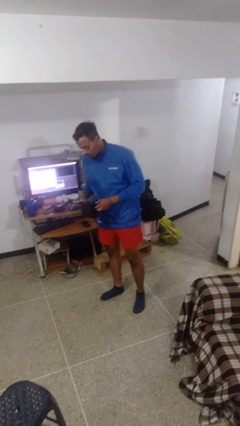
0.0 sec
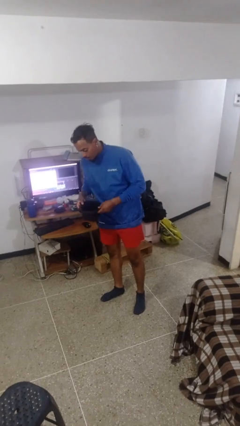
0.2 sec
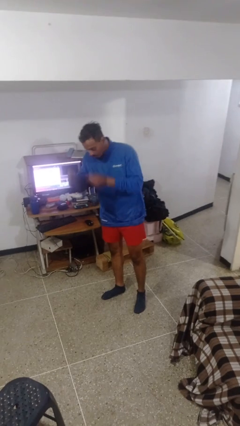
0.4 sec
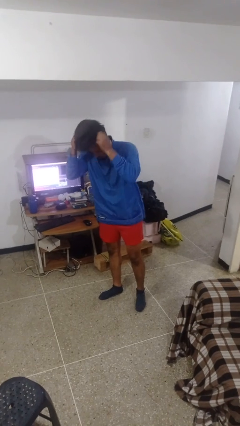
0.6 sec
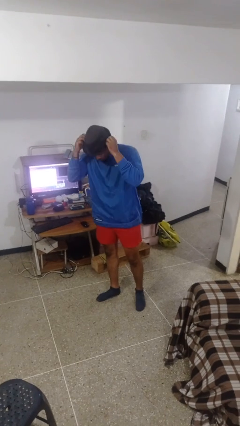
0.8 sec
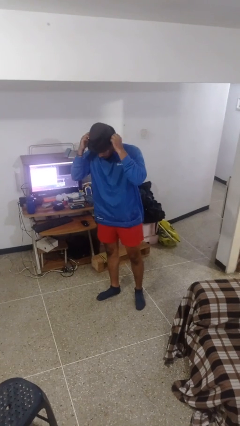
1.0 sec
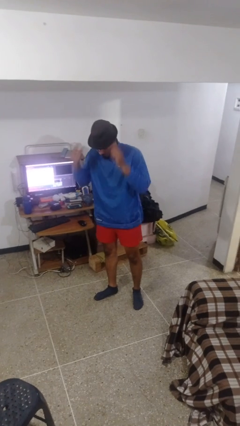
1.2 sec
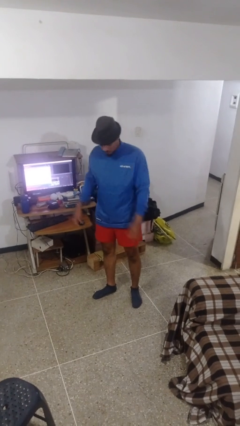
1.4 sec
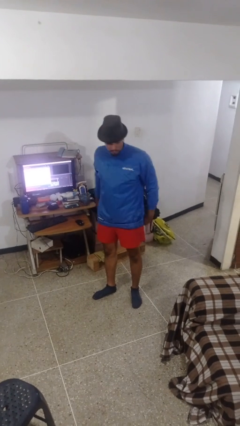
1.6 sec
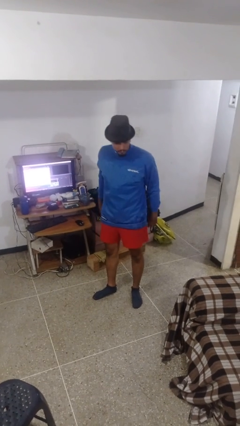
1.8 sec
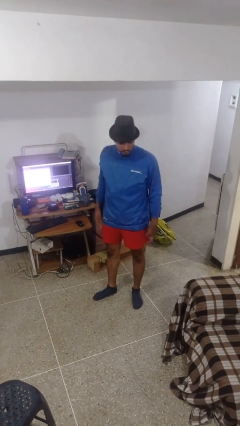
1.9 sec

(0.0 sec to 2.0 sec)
person puts on hat

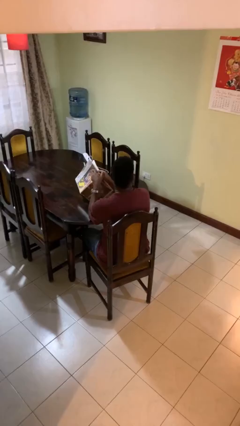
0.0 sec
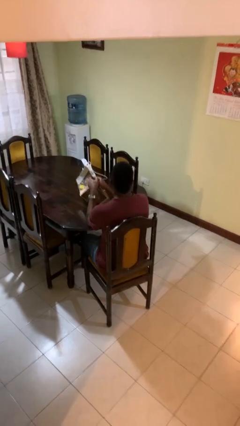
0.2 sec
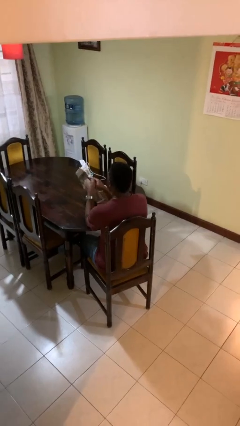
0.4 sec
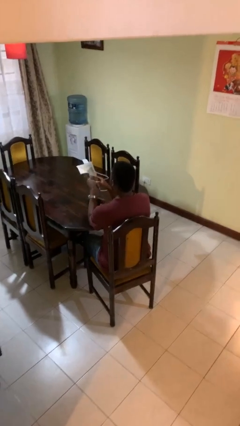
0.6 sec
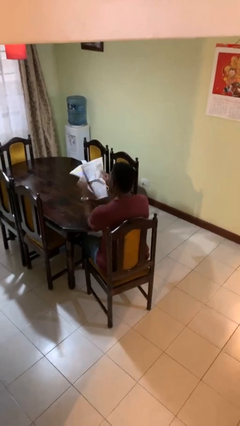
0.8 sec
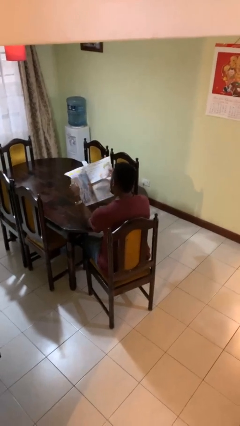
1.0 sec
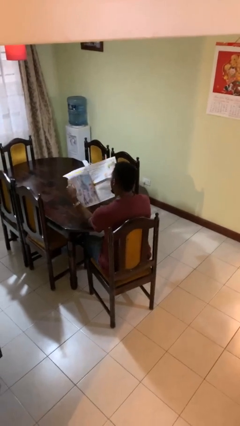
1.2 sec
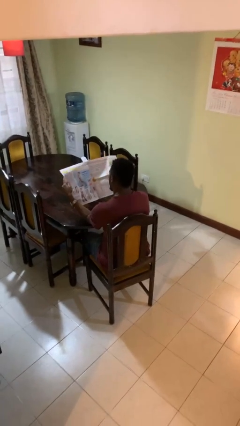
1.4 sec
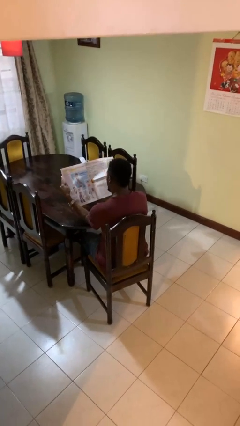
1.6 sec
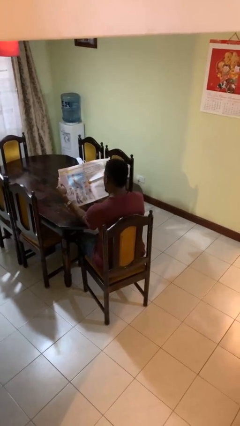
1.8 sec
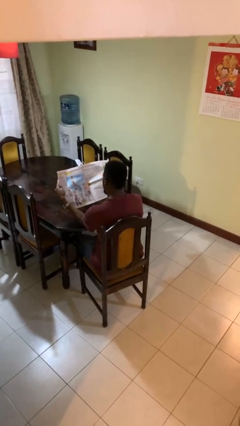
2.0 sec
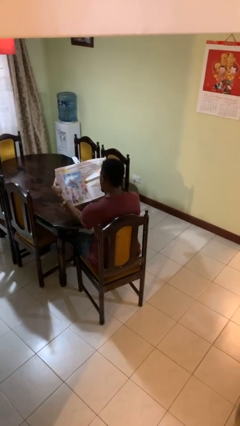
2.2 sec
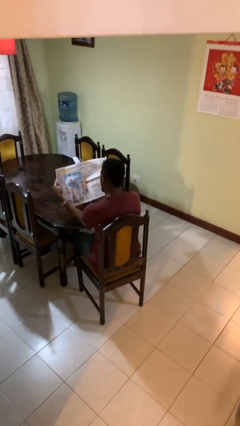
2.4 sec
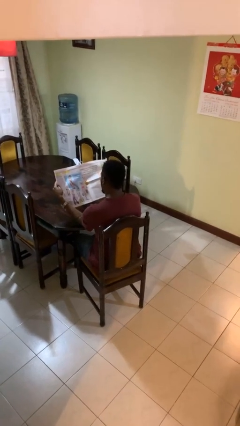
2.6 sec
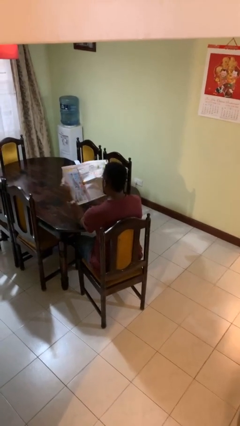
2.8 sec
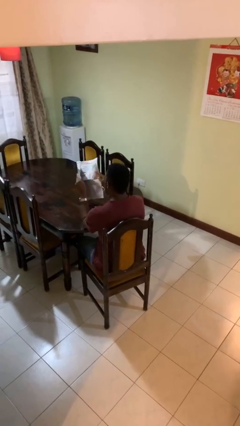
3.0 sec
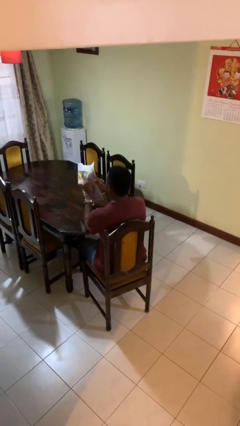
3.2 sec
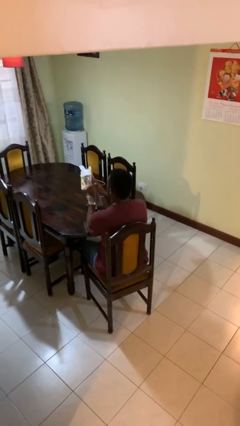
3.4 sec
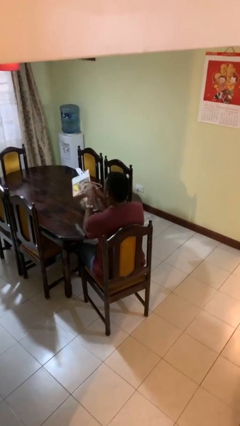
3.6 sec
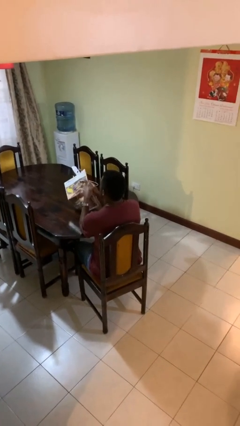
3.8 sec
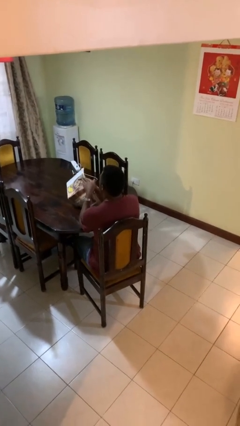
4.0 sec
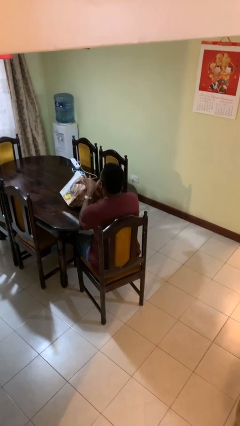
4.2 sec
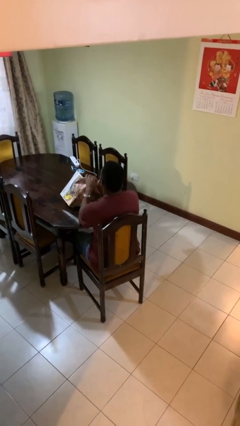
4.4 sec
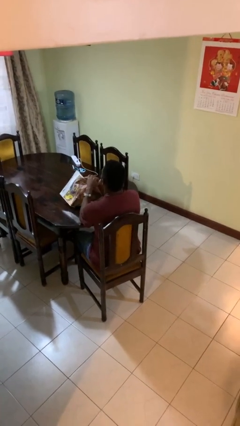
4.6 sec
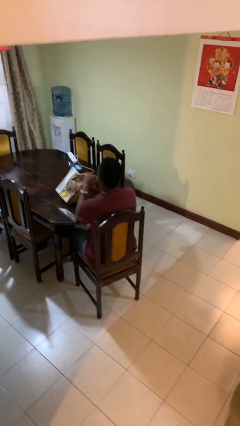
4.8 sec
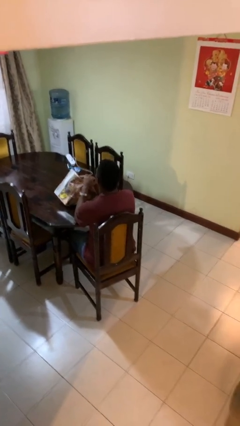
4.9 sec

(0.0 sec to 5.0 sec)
person reads newspaper

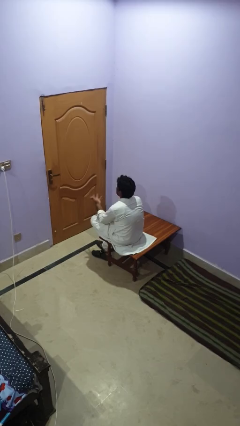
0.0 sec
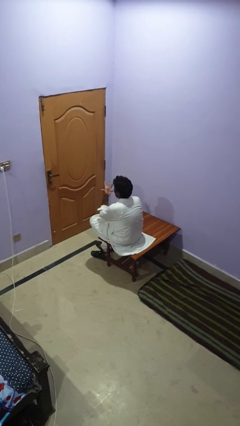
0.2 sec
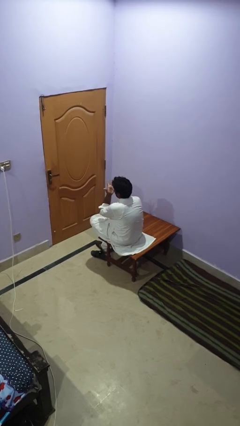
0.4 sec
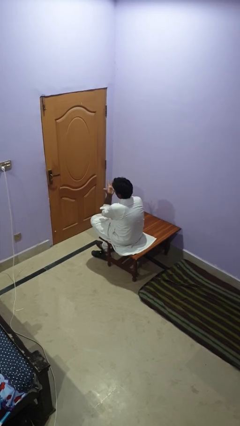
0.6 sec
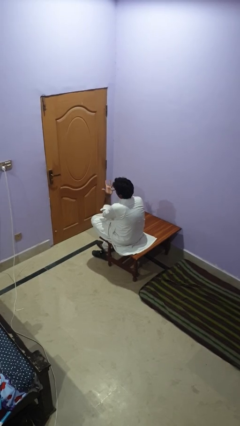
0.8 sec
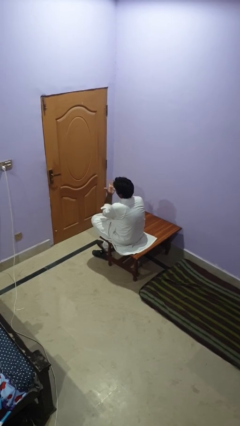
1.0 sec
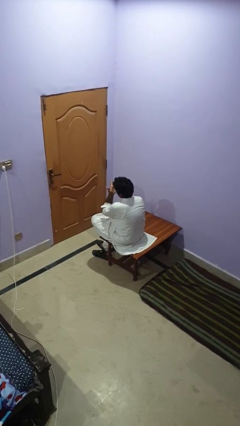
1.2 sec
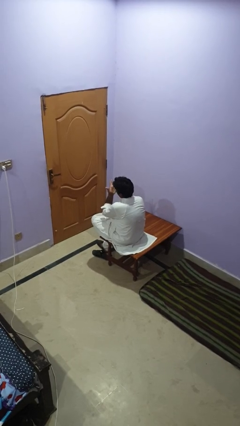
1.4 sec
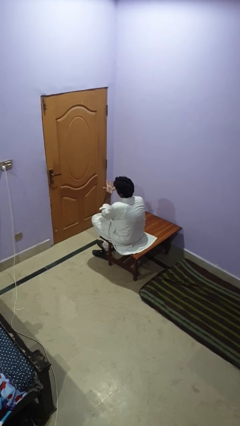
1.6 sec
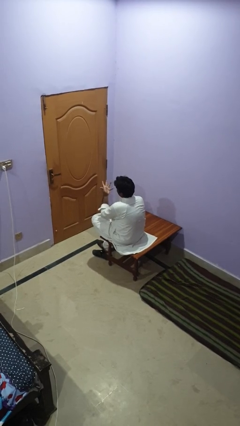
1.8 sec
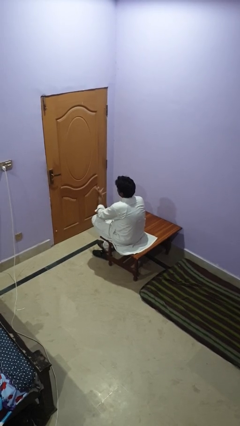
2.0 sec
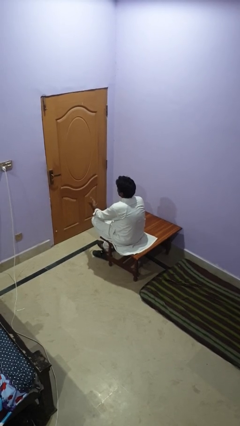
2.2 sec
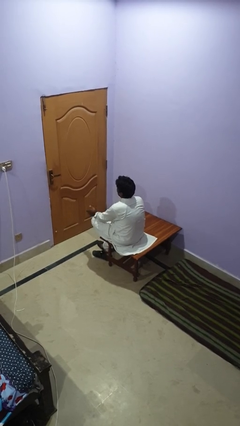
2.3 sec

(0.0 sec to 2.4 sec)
person licks fingers

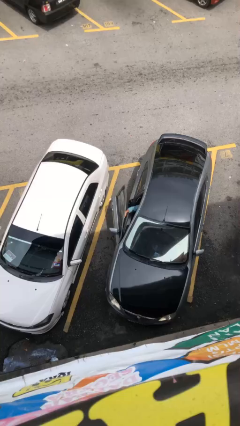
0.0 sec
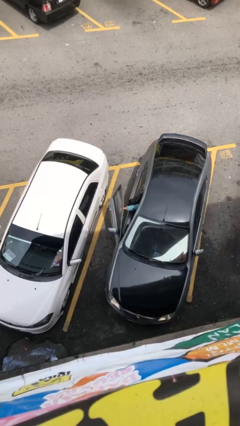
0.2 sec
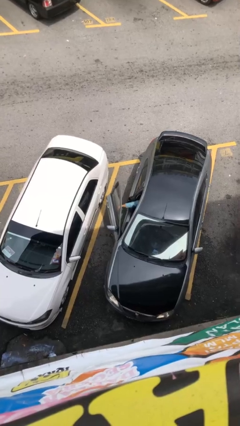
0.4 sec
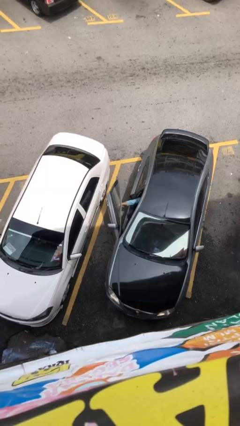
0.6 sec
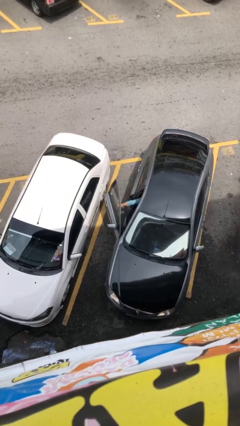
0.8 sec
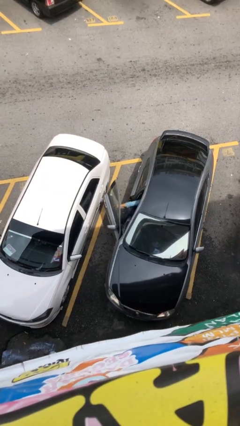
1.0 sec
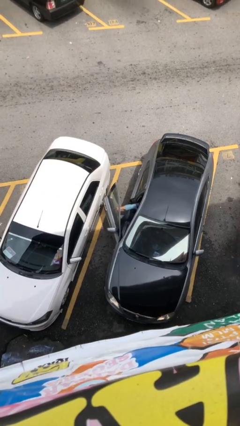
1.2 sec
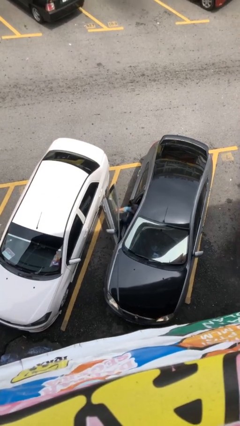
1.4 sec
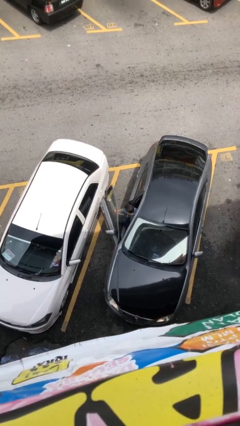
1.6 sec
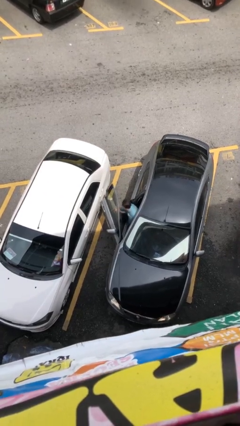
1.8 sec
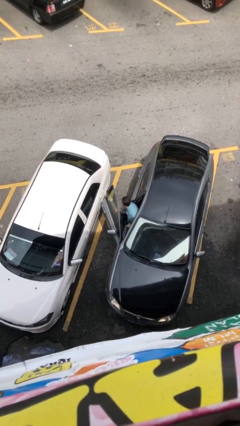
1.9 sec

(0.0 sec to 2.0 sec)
person opens car door

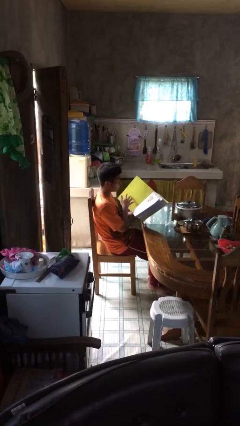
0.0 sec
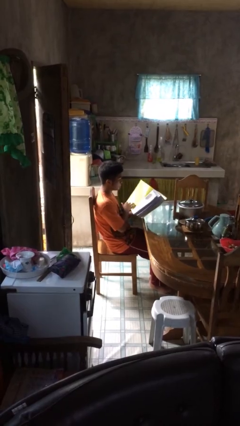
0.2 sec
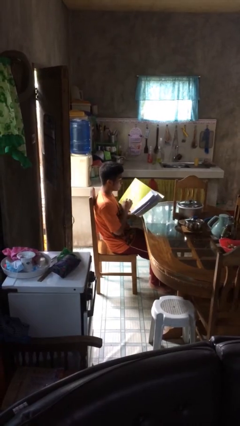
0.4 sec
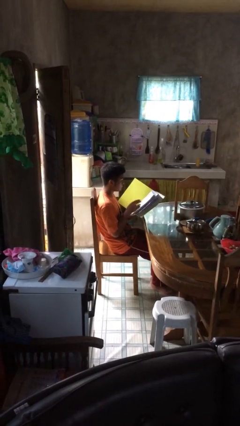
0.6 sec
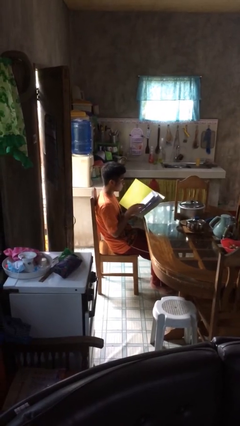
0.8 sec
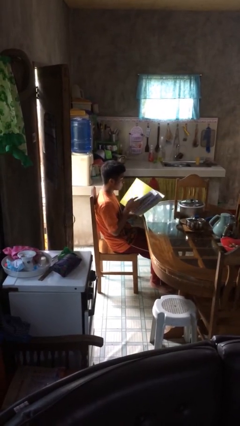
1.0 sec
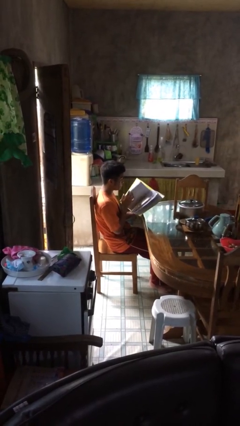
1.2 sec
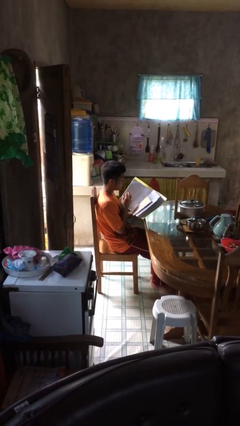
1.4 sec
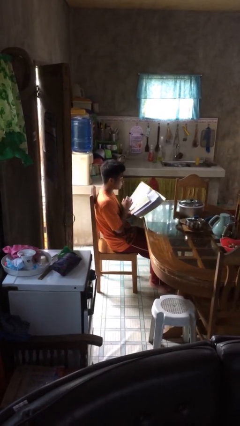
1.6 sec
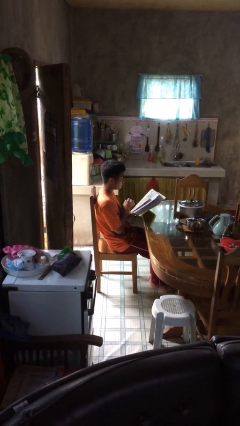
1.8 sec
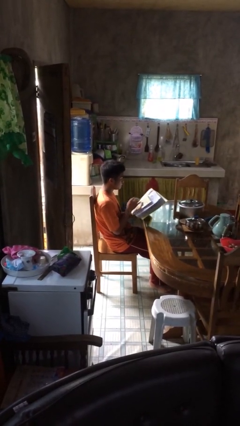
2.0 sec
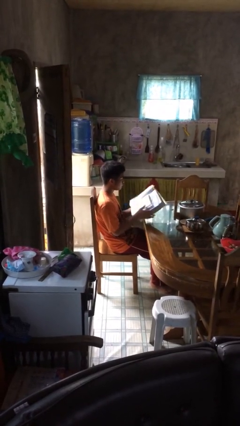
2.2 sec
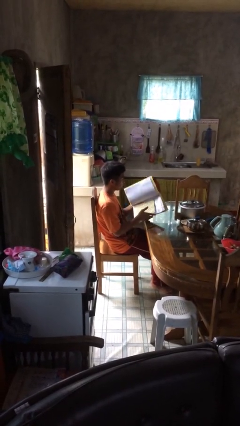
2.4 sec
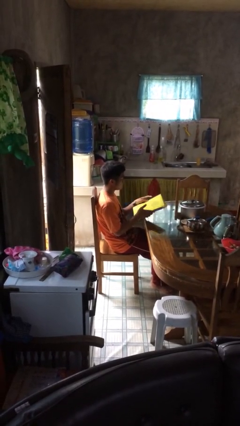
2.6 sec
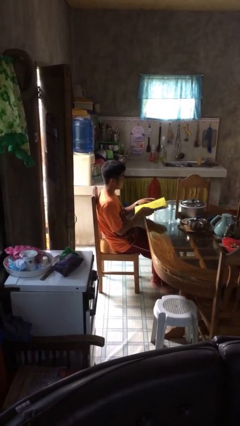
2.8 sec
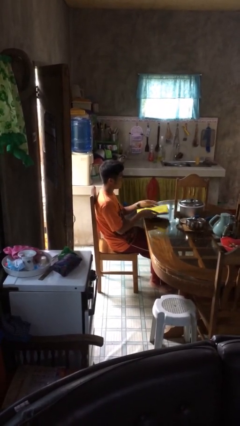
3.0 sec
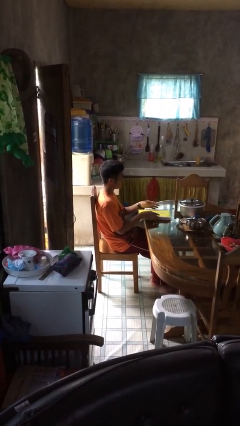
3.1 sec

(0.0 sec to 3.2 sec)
person reads document

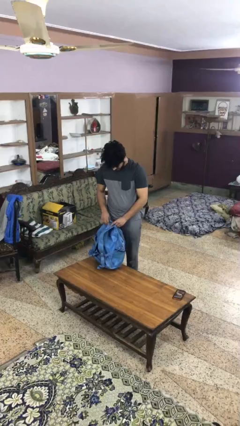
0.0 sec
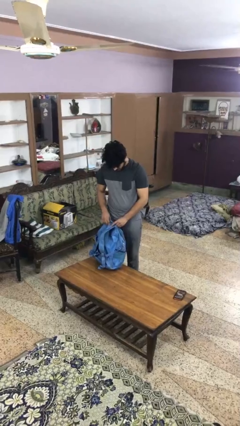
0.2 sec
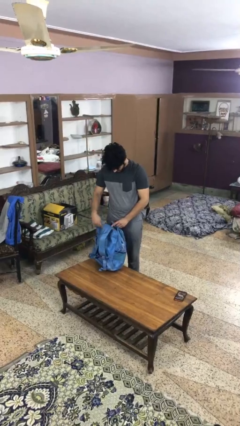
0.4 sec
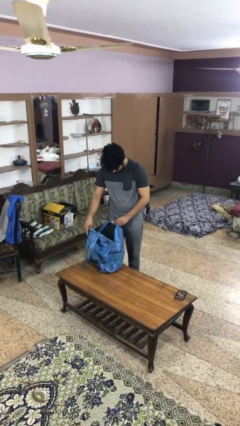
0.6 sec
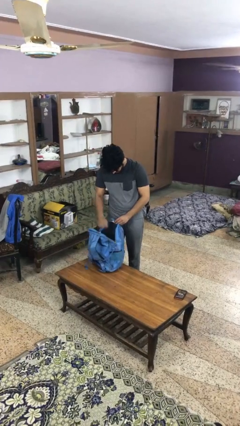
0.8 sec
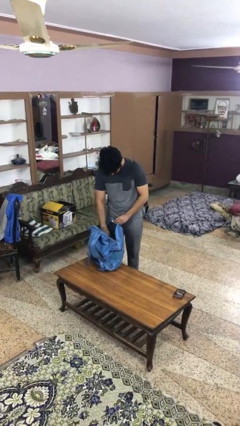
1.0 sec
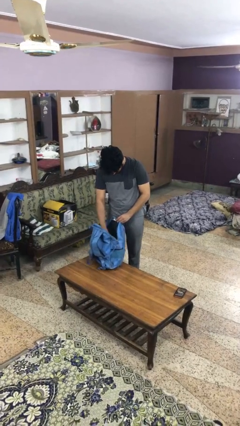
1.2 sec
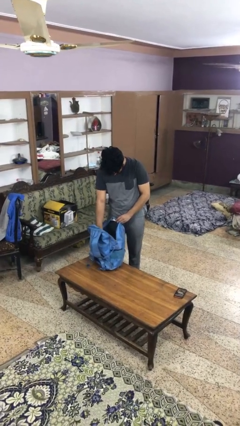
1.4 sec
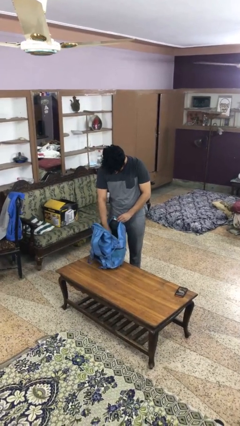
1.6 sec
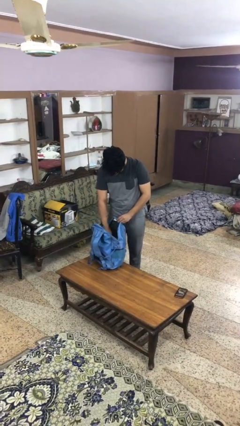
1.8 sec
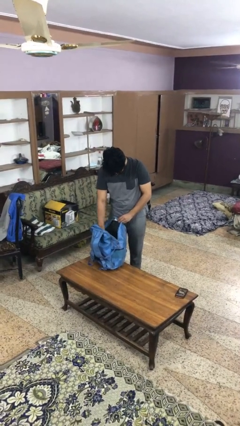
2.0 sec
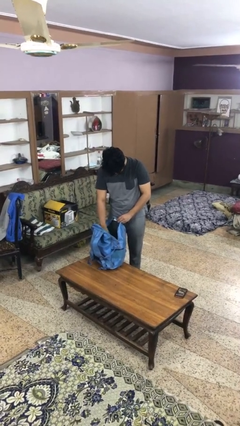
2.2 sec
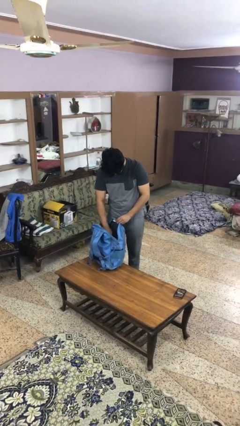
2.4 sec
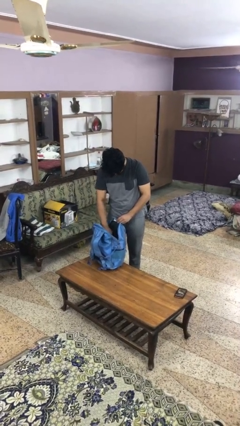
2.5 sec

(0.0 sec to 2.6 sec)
person searches in bag

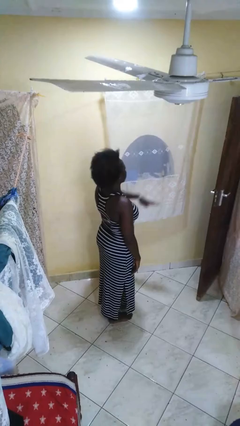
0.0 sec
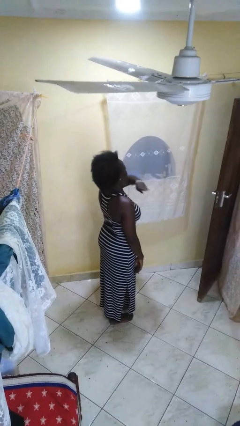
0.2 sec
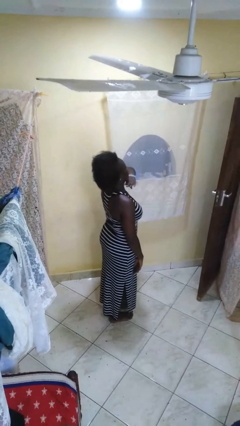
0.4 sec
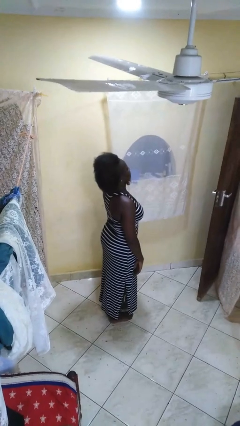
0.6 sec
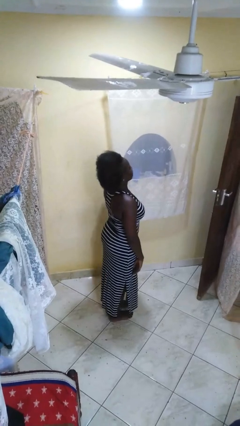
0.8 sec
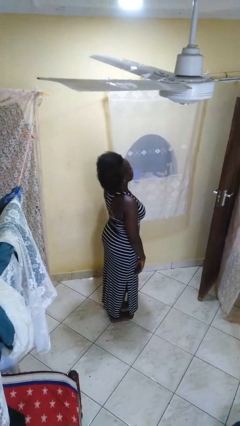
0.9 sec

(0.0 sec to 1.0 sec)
person gestures cut
